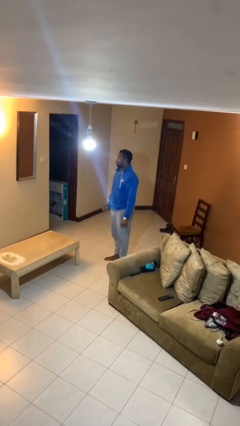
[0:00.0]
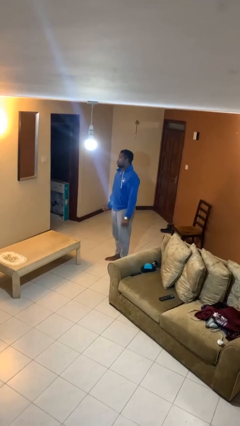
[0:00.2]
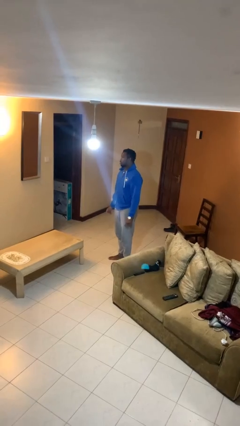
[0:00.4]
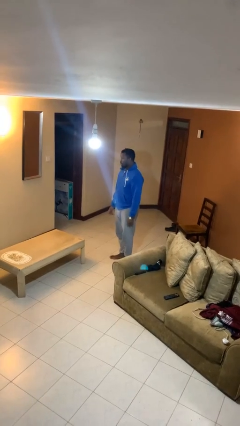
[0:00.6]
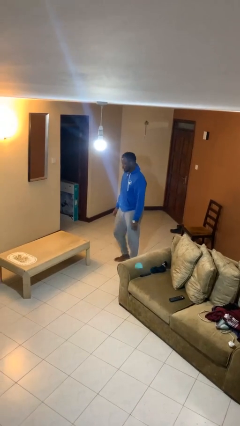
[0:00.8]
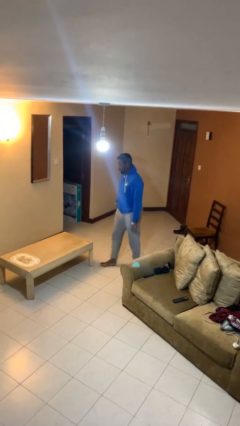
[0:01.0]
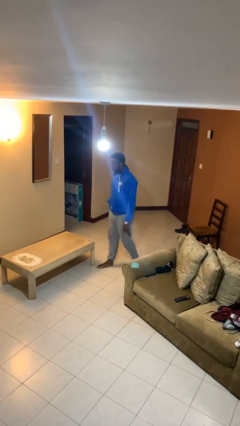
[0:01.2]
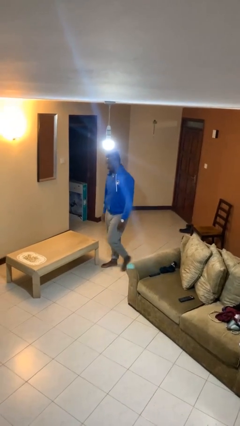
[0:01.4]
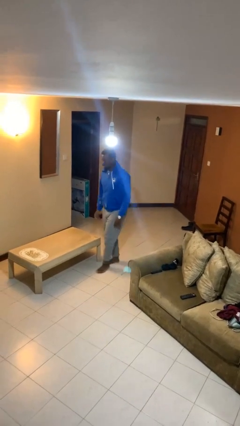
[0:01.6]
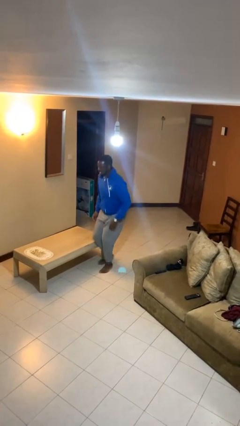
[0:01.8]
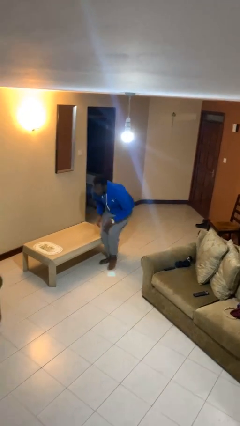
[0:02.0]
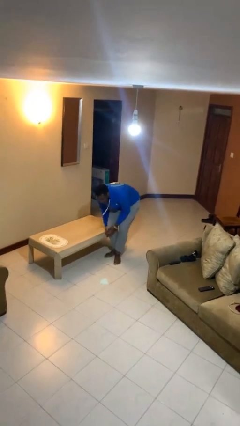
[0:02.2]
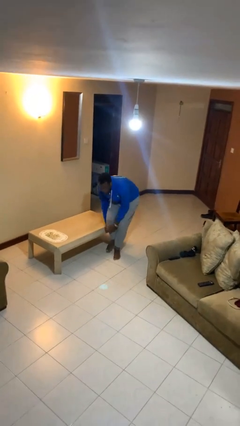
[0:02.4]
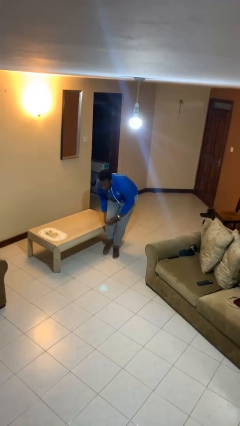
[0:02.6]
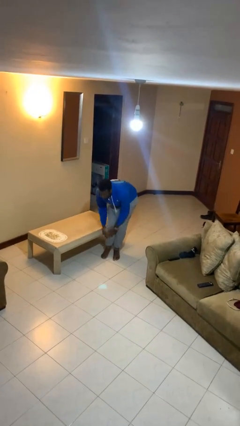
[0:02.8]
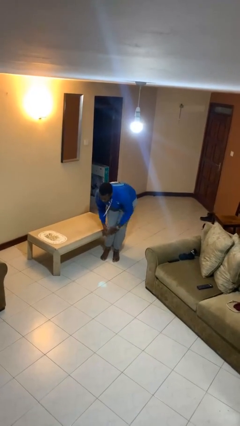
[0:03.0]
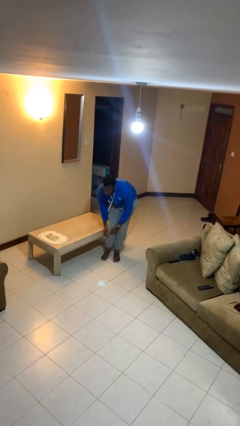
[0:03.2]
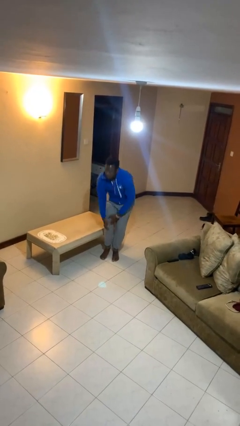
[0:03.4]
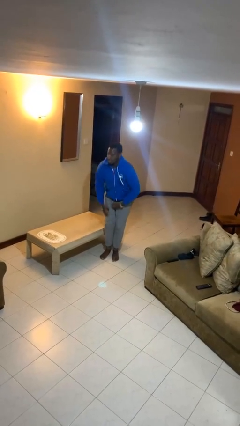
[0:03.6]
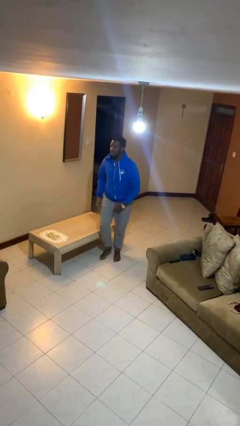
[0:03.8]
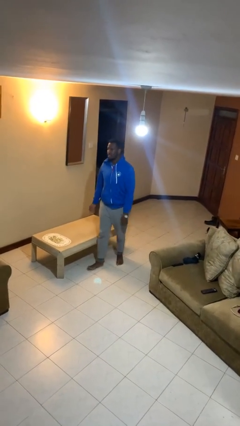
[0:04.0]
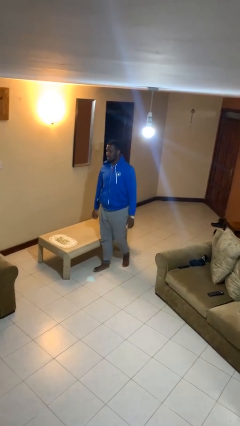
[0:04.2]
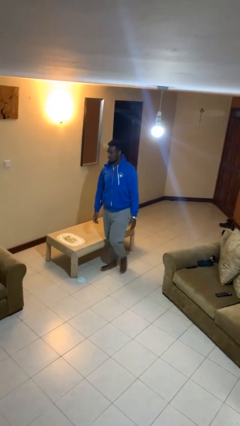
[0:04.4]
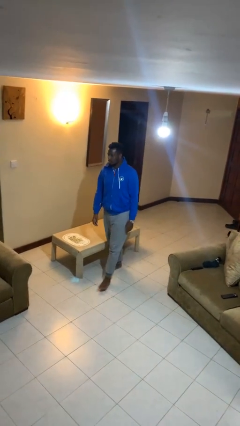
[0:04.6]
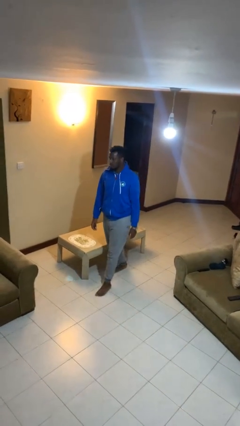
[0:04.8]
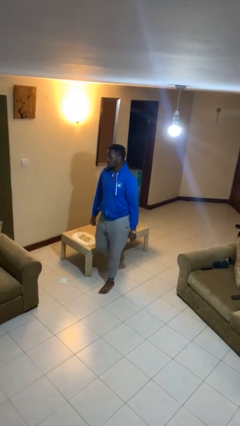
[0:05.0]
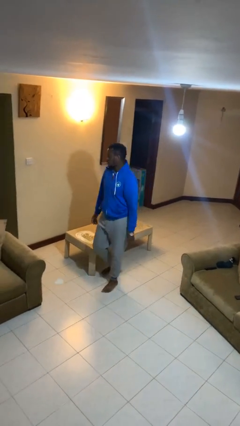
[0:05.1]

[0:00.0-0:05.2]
person bumps into table

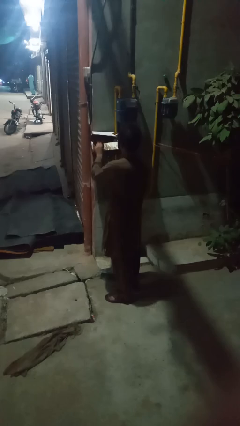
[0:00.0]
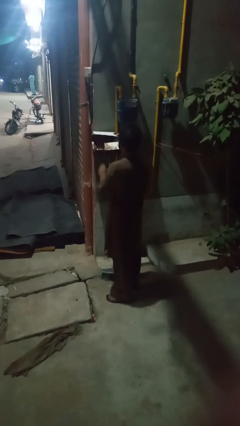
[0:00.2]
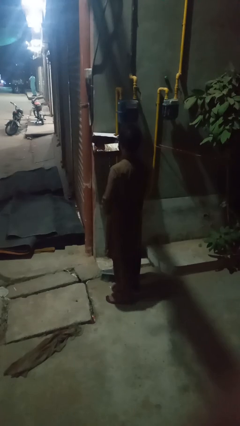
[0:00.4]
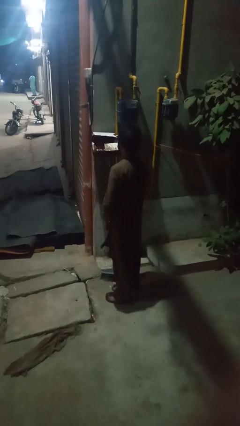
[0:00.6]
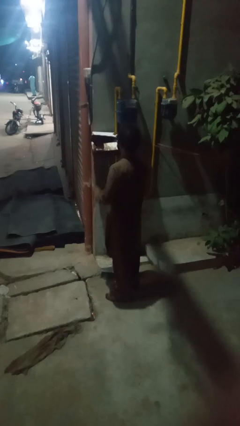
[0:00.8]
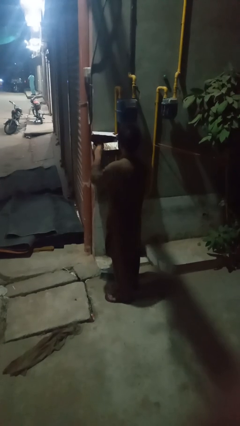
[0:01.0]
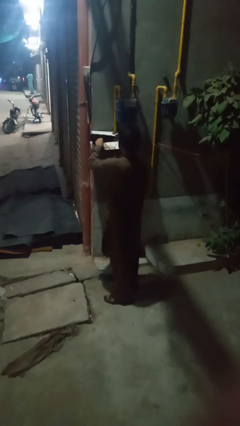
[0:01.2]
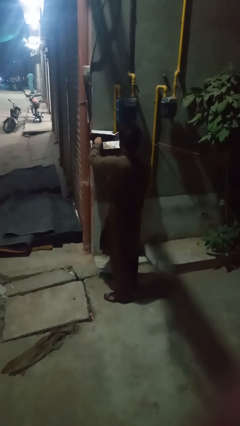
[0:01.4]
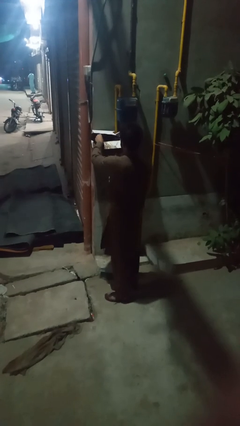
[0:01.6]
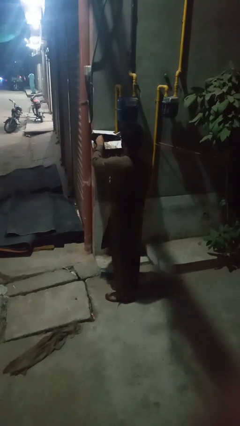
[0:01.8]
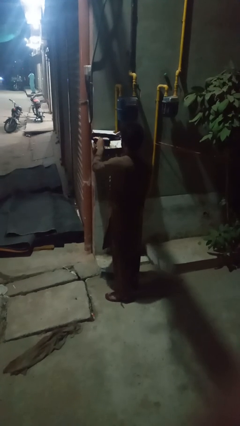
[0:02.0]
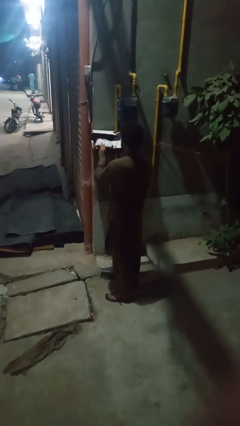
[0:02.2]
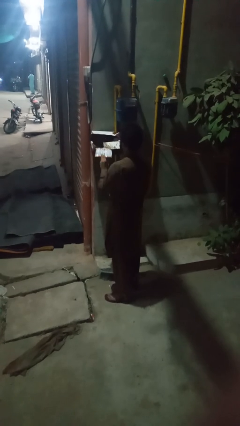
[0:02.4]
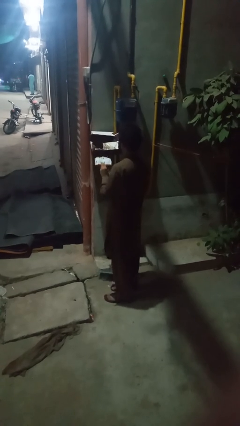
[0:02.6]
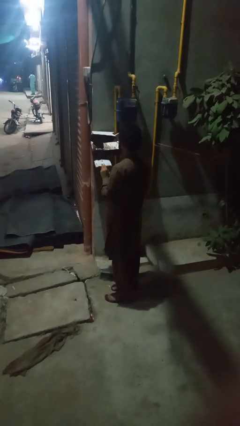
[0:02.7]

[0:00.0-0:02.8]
person puts letters in mailbox

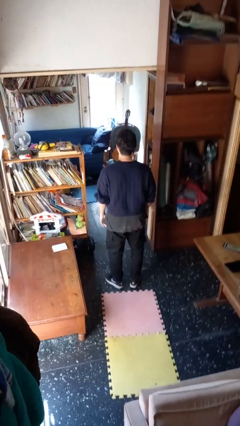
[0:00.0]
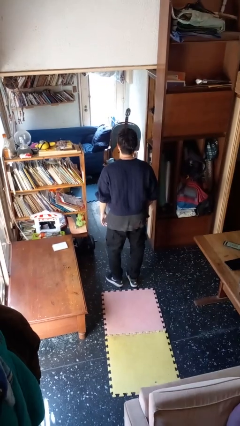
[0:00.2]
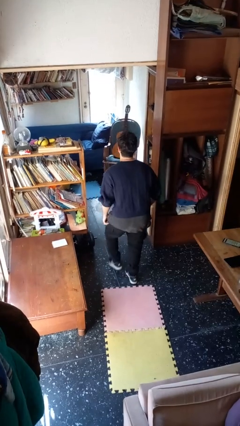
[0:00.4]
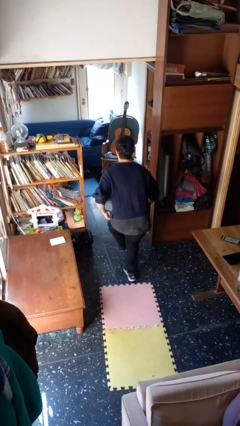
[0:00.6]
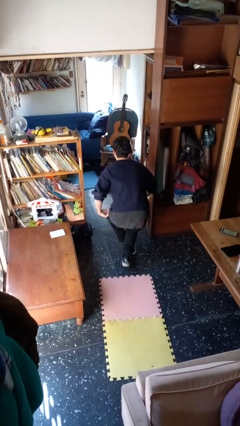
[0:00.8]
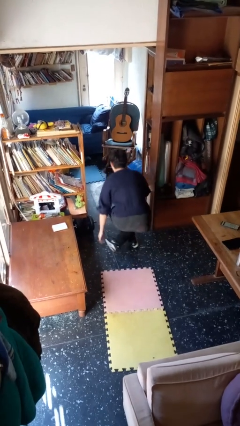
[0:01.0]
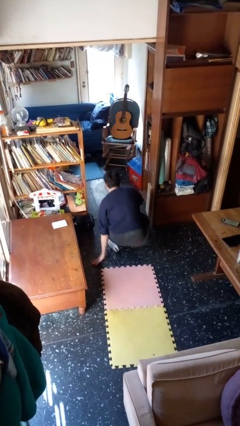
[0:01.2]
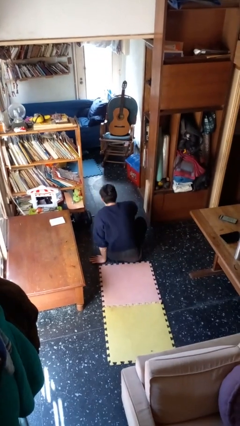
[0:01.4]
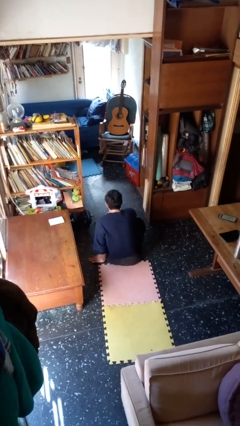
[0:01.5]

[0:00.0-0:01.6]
person sits crisscross

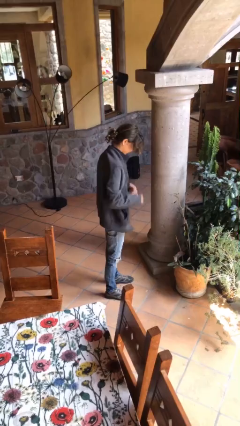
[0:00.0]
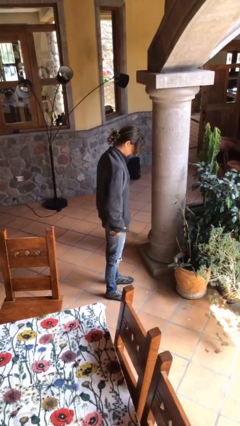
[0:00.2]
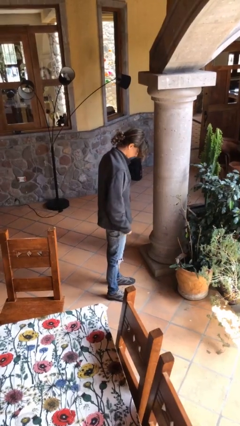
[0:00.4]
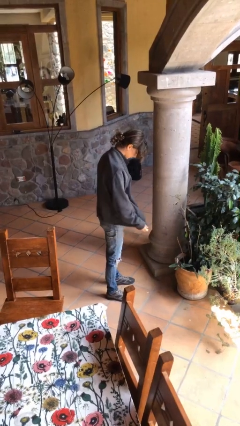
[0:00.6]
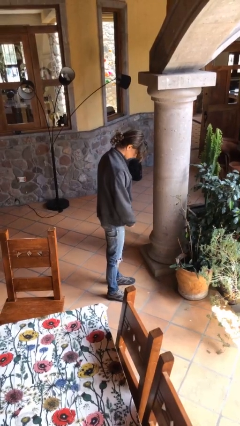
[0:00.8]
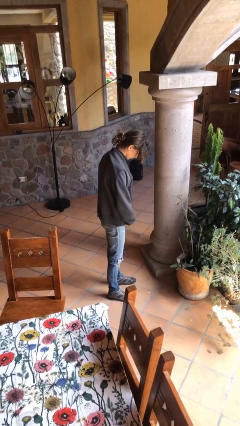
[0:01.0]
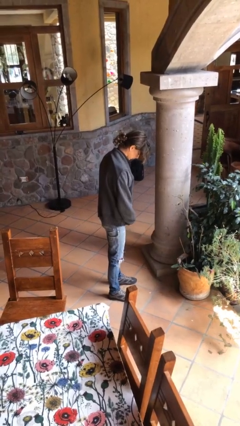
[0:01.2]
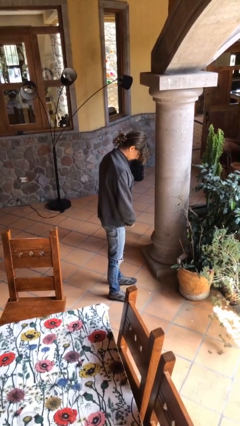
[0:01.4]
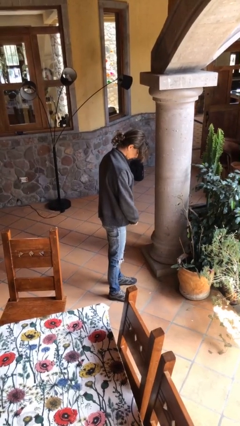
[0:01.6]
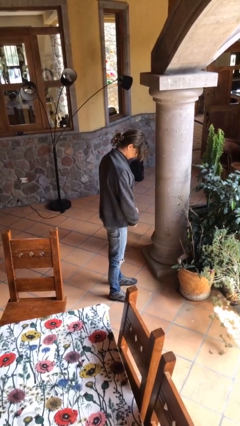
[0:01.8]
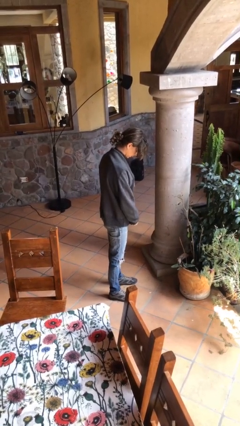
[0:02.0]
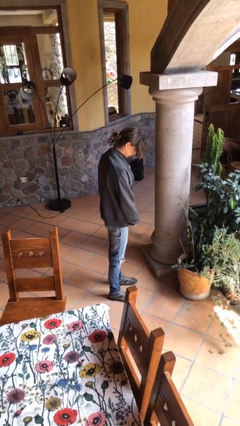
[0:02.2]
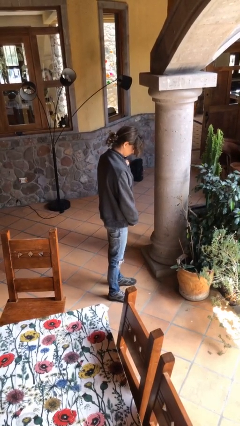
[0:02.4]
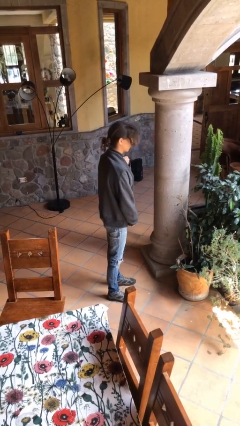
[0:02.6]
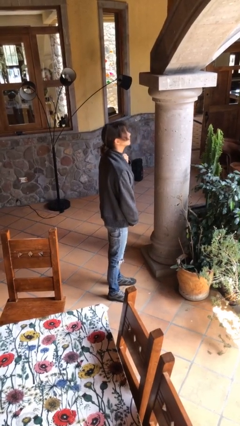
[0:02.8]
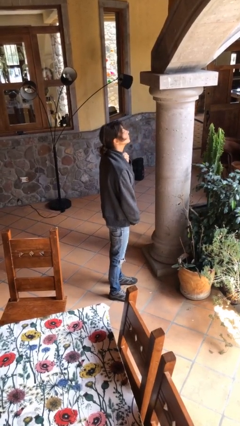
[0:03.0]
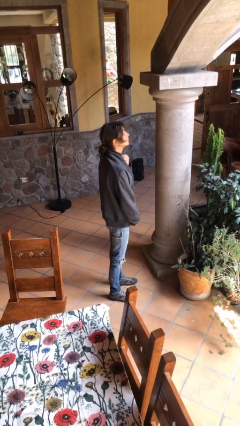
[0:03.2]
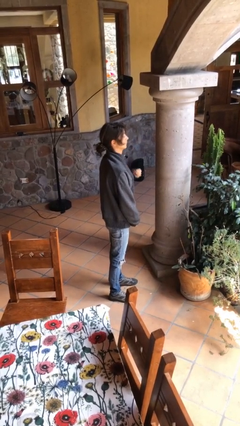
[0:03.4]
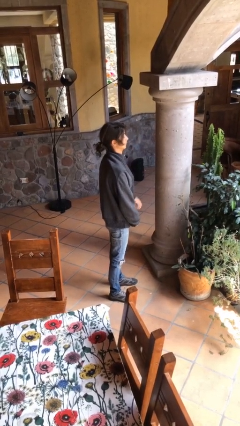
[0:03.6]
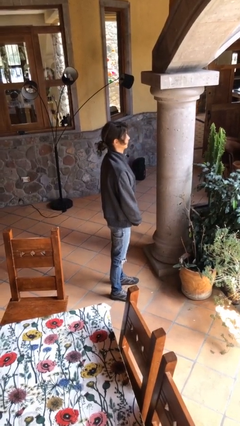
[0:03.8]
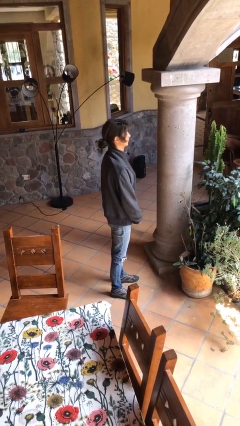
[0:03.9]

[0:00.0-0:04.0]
person zips up jacket

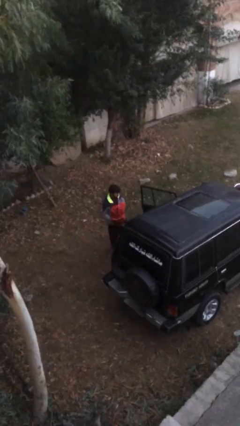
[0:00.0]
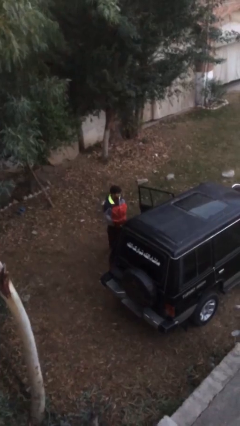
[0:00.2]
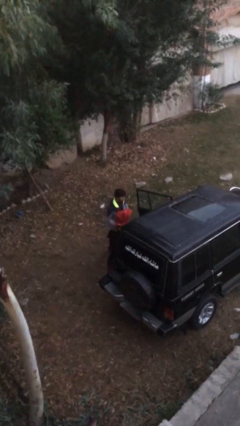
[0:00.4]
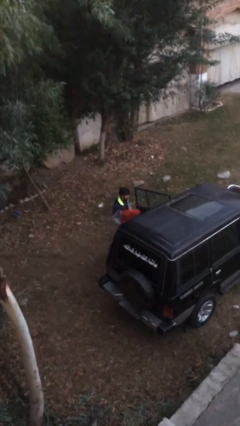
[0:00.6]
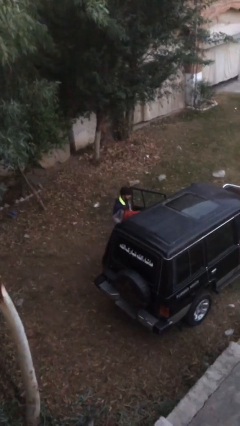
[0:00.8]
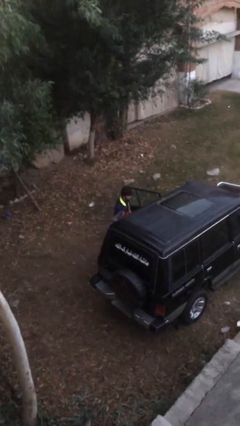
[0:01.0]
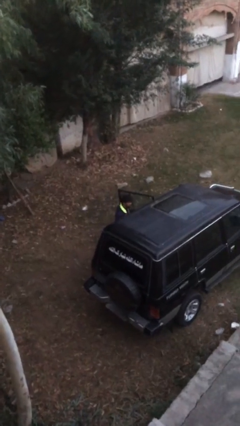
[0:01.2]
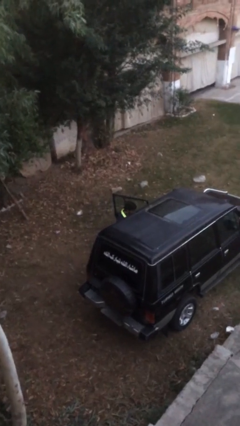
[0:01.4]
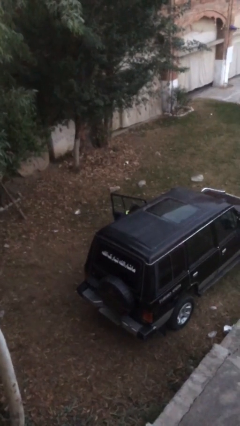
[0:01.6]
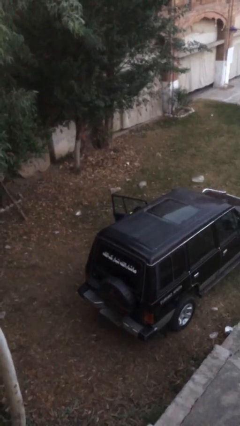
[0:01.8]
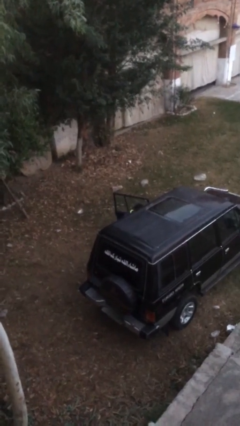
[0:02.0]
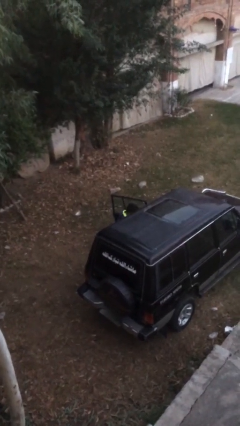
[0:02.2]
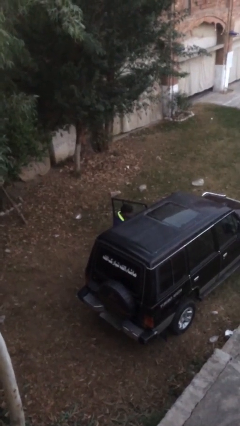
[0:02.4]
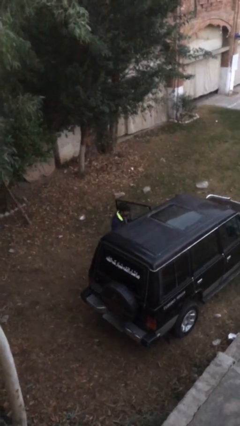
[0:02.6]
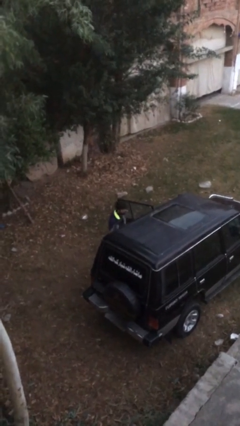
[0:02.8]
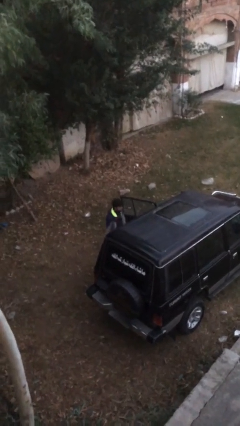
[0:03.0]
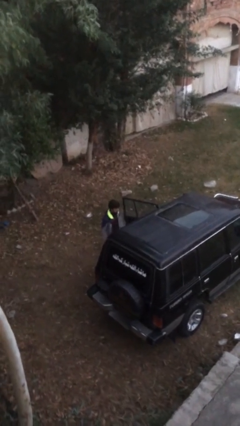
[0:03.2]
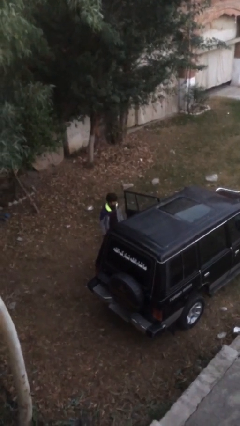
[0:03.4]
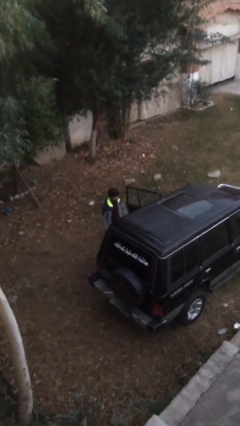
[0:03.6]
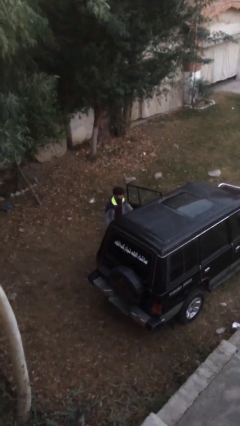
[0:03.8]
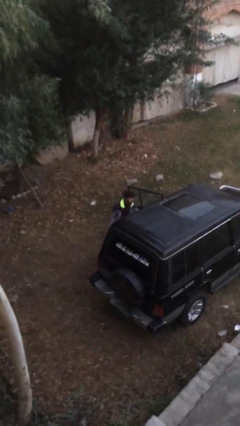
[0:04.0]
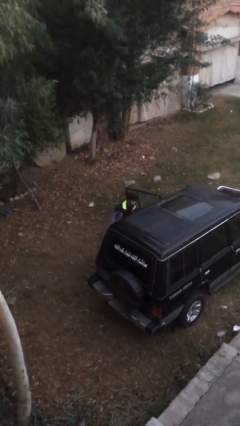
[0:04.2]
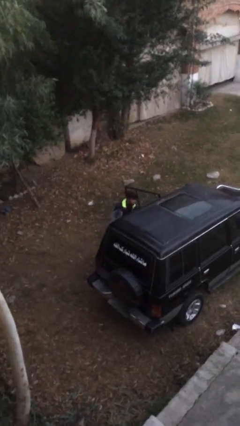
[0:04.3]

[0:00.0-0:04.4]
person loads car
